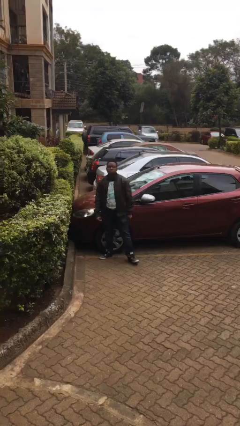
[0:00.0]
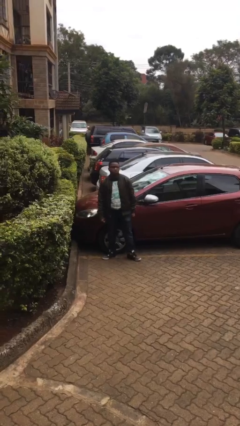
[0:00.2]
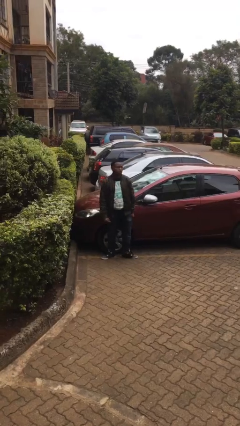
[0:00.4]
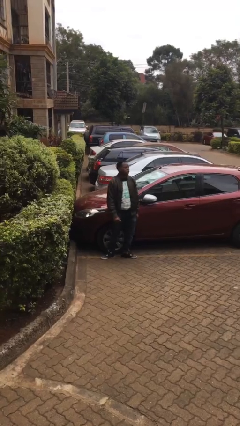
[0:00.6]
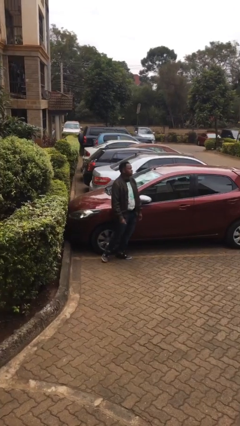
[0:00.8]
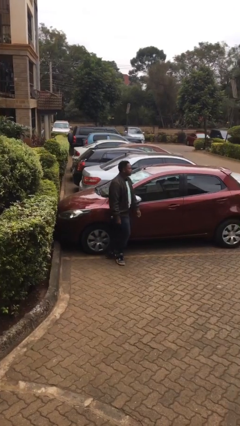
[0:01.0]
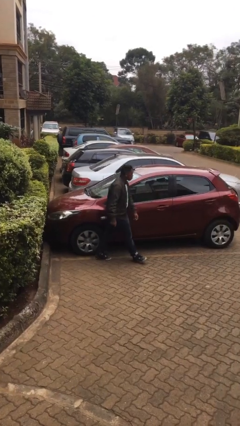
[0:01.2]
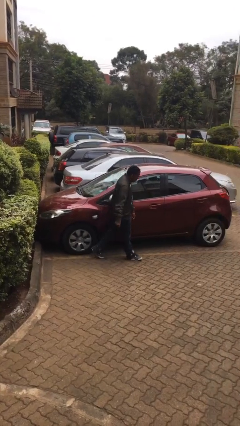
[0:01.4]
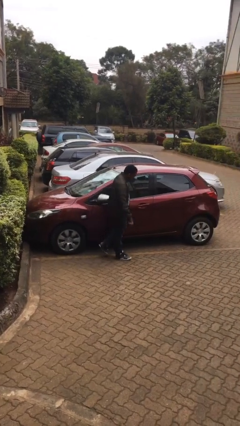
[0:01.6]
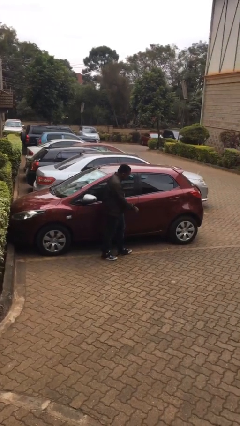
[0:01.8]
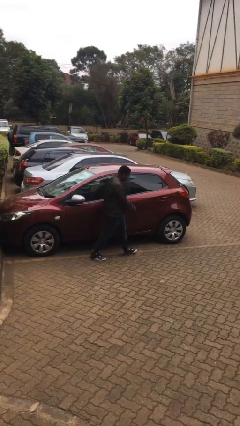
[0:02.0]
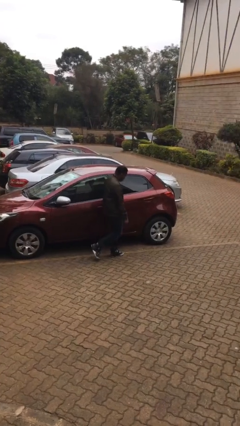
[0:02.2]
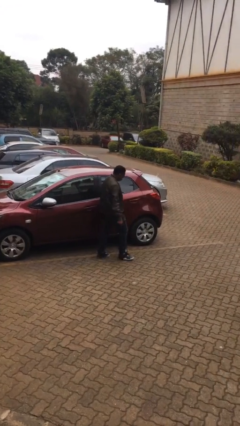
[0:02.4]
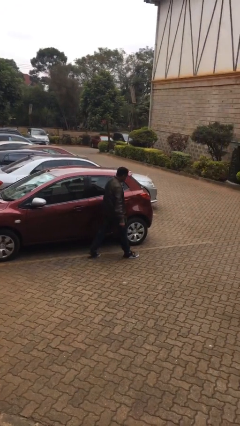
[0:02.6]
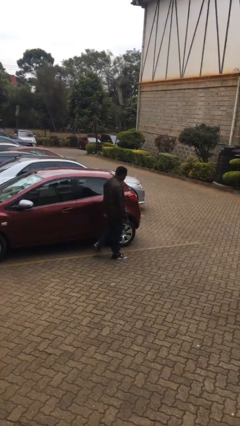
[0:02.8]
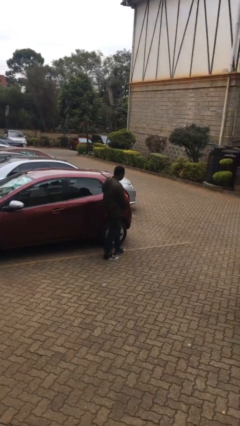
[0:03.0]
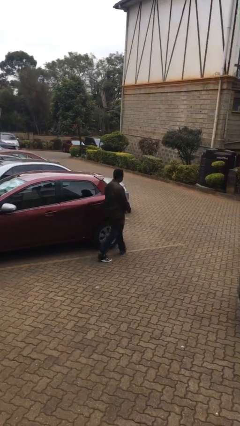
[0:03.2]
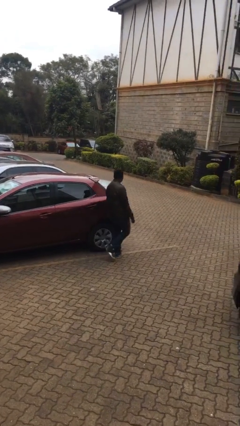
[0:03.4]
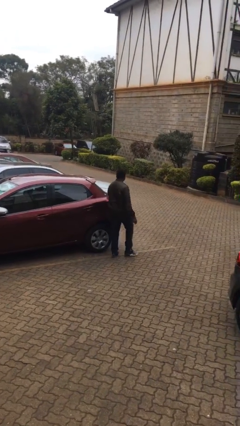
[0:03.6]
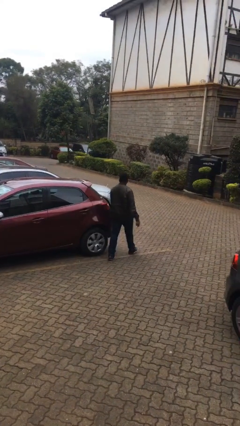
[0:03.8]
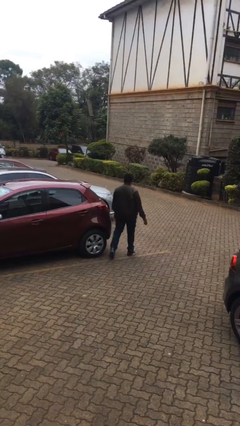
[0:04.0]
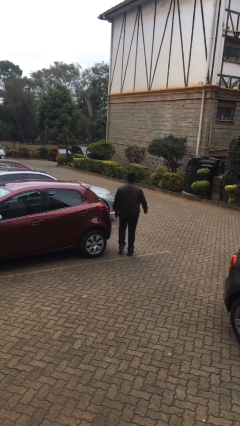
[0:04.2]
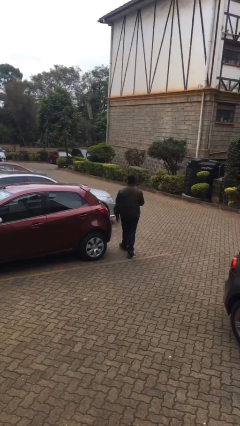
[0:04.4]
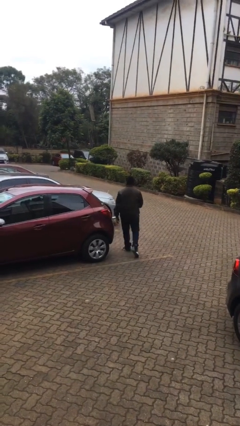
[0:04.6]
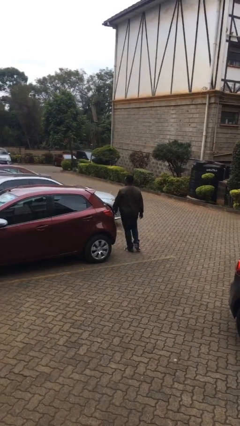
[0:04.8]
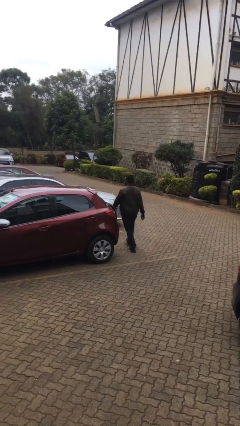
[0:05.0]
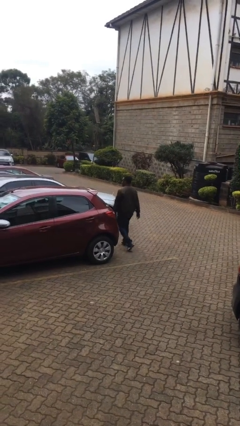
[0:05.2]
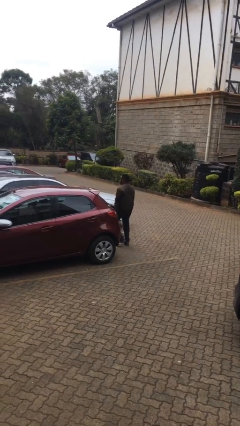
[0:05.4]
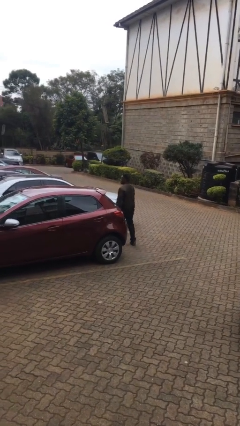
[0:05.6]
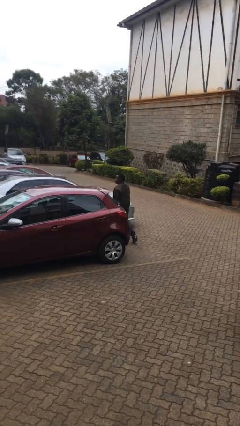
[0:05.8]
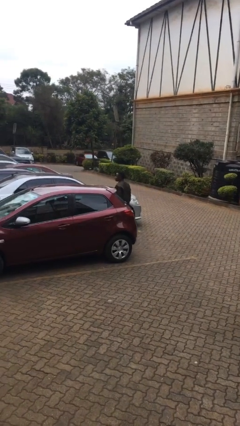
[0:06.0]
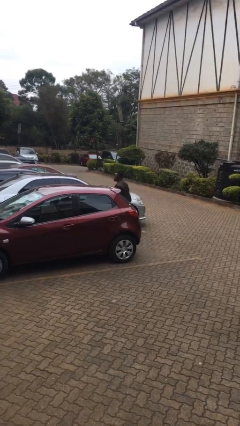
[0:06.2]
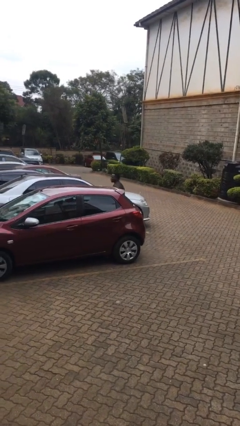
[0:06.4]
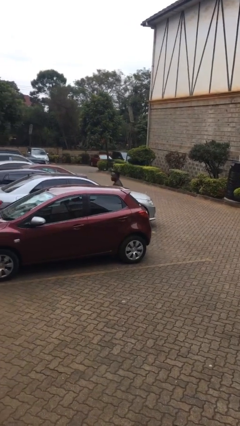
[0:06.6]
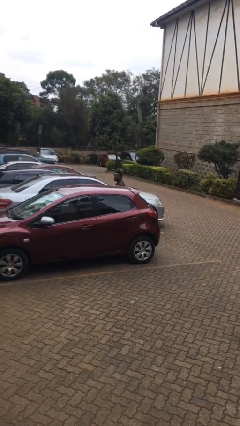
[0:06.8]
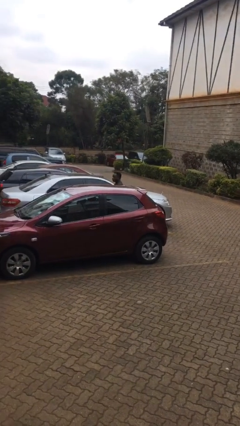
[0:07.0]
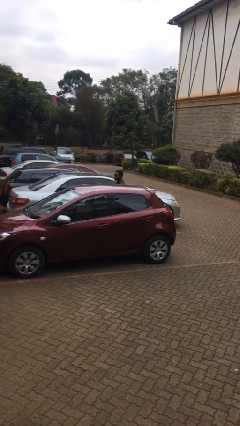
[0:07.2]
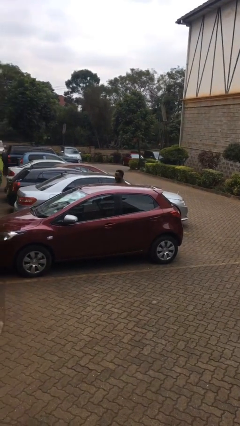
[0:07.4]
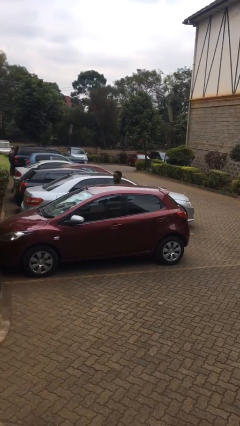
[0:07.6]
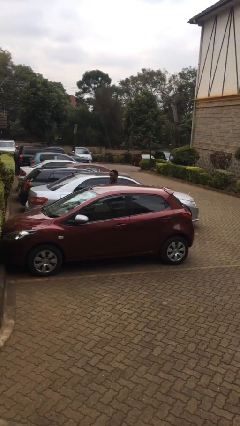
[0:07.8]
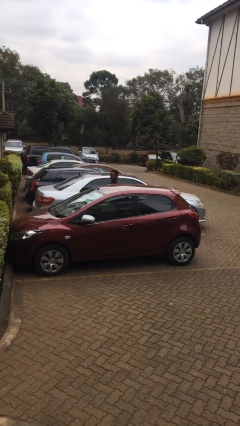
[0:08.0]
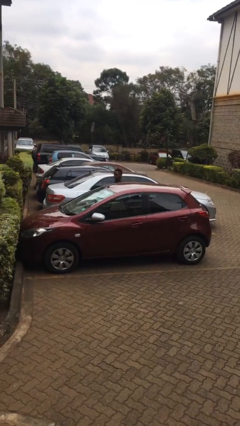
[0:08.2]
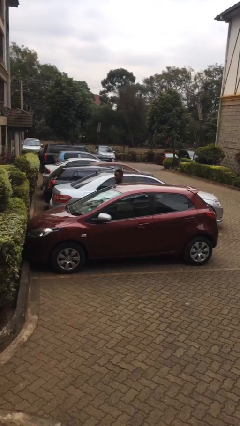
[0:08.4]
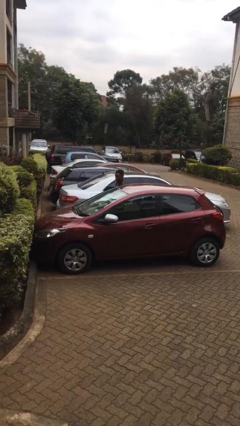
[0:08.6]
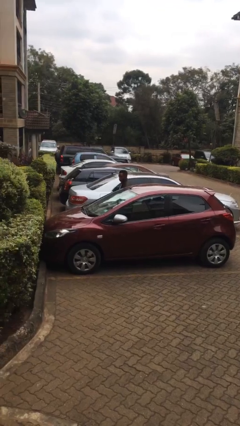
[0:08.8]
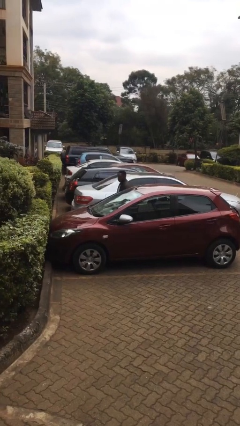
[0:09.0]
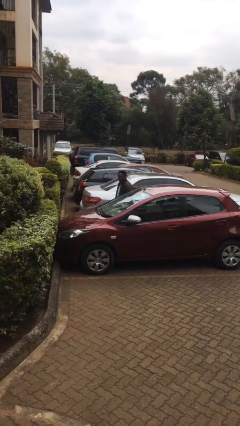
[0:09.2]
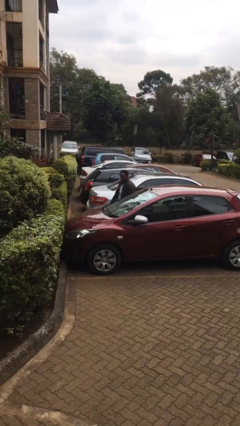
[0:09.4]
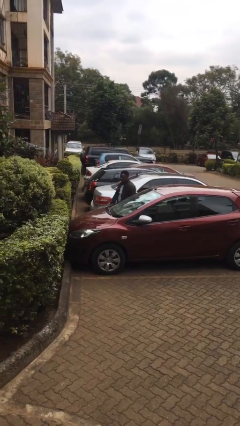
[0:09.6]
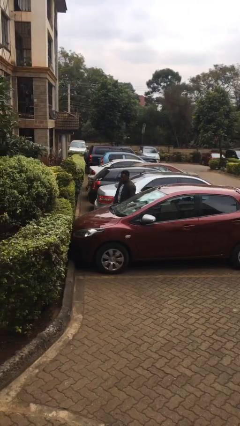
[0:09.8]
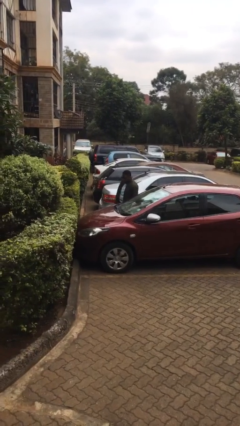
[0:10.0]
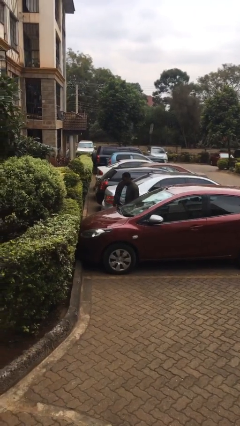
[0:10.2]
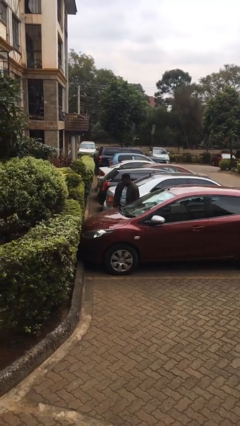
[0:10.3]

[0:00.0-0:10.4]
person walks around car

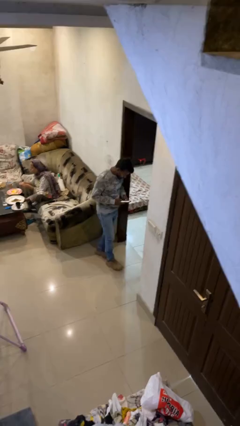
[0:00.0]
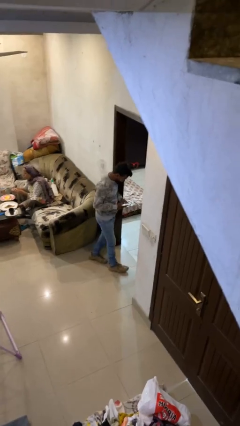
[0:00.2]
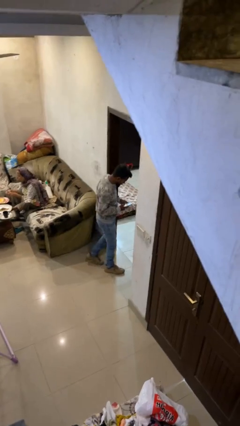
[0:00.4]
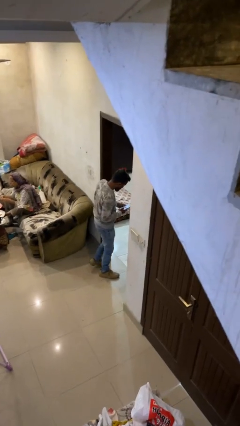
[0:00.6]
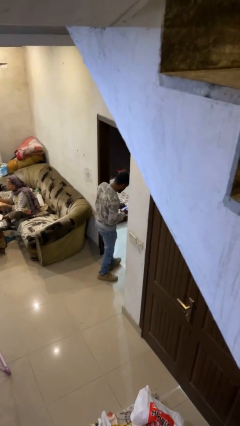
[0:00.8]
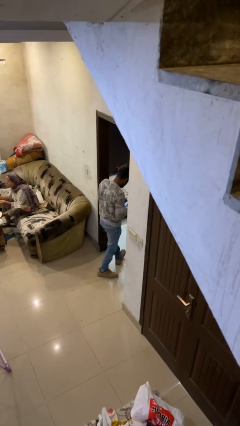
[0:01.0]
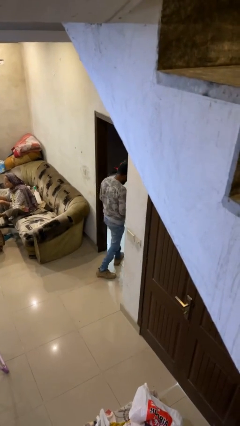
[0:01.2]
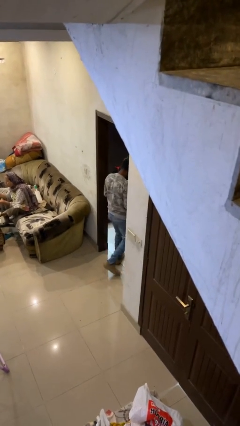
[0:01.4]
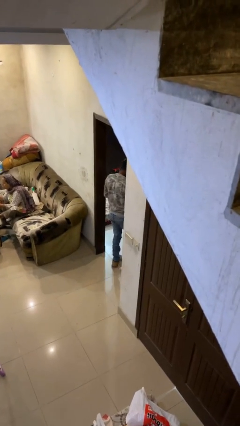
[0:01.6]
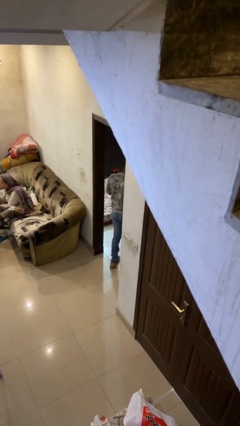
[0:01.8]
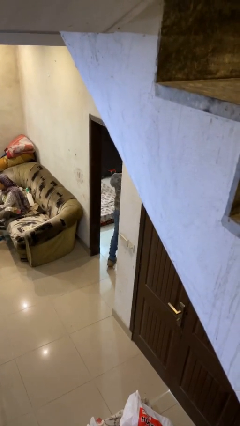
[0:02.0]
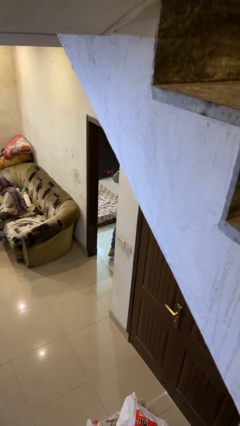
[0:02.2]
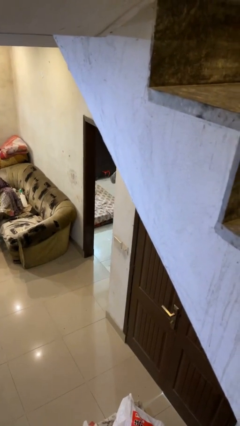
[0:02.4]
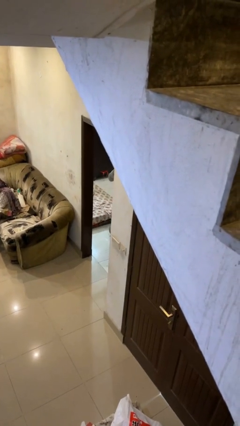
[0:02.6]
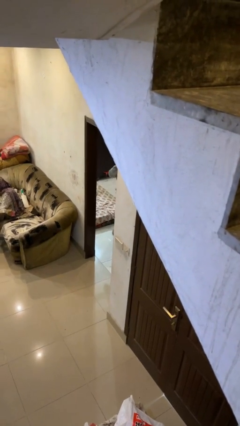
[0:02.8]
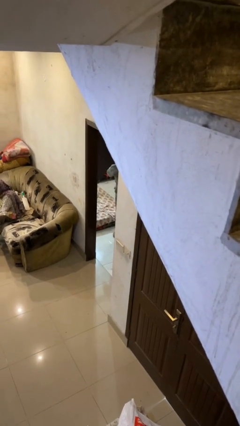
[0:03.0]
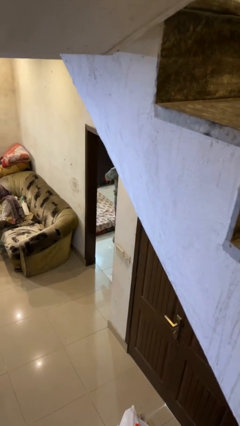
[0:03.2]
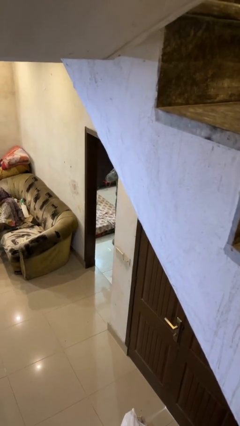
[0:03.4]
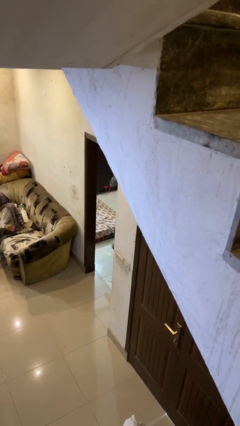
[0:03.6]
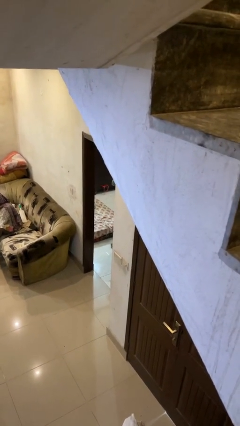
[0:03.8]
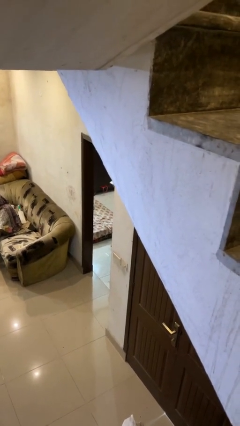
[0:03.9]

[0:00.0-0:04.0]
person exits scene through structure

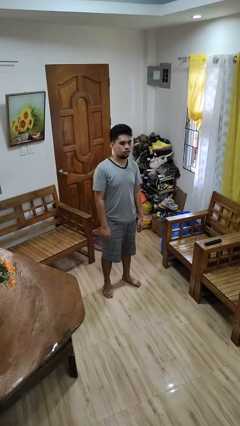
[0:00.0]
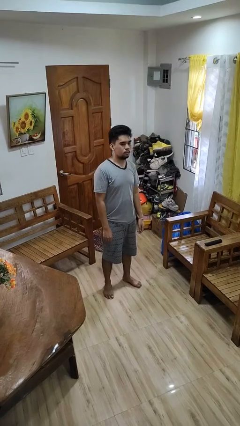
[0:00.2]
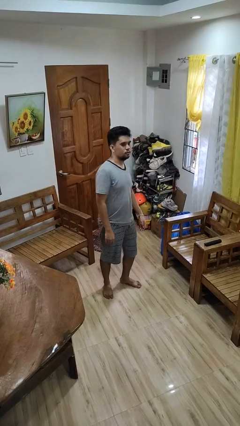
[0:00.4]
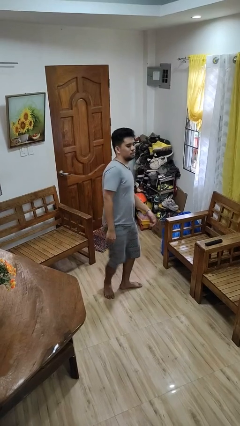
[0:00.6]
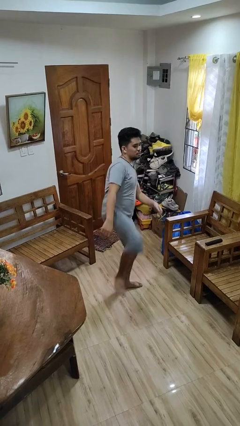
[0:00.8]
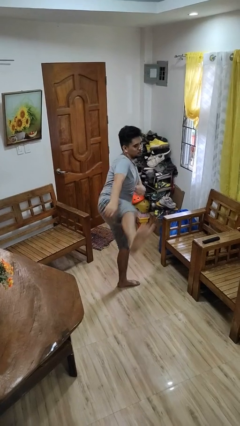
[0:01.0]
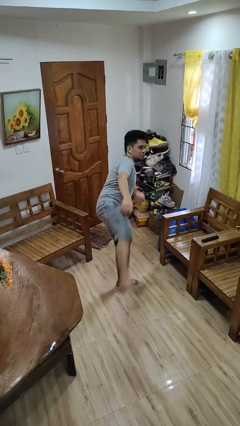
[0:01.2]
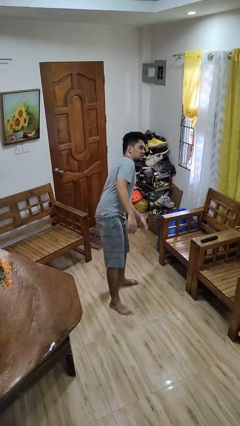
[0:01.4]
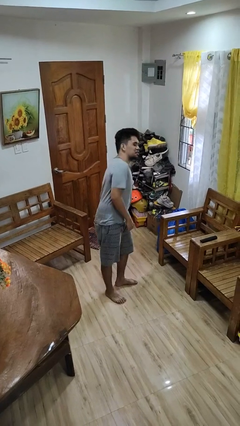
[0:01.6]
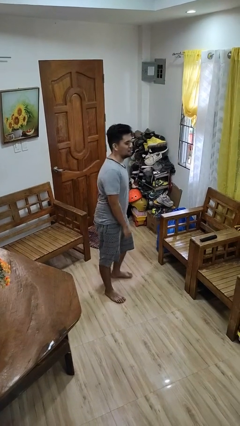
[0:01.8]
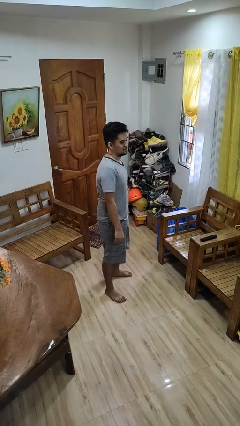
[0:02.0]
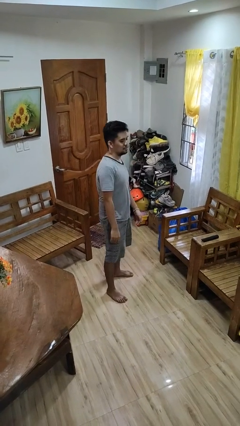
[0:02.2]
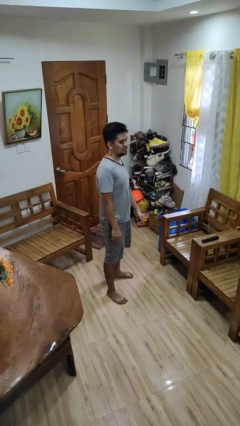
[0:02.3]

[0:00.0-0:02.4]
person karate kicks

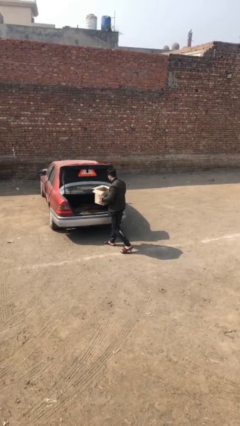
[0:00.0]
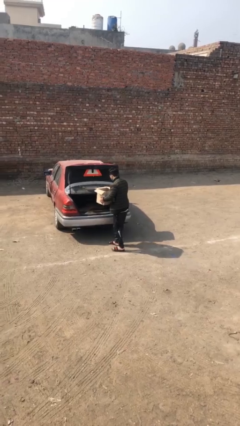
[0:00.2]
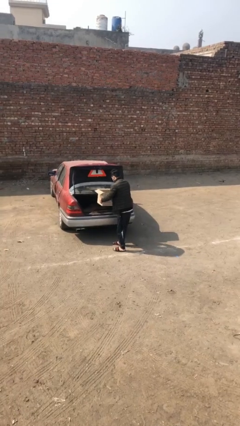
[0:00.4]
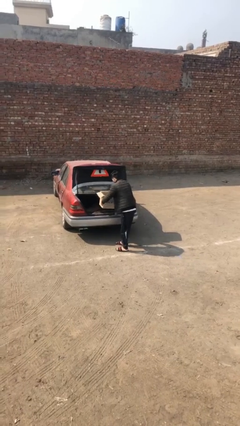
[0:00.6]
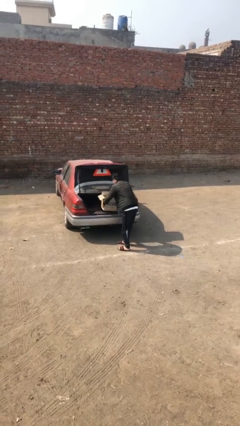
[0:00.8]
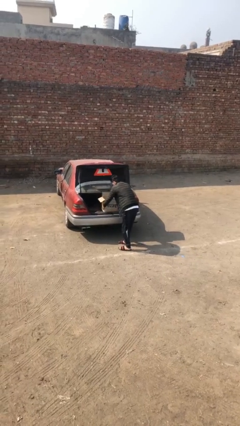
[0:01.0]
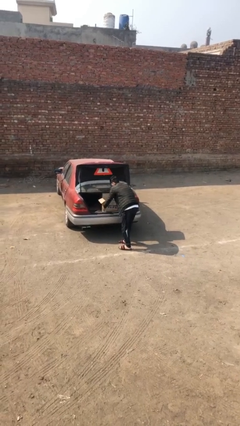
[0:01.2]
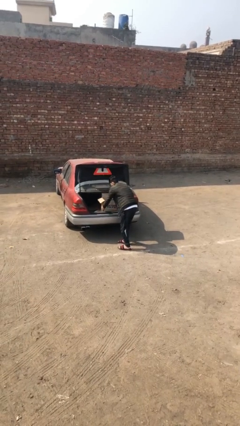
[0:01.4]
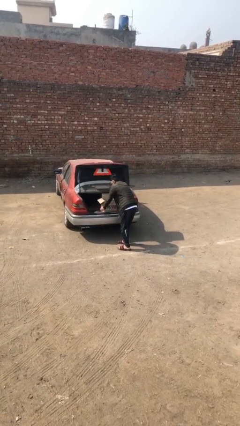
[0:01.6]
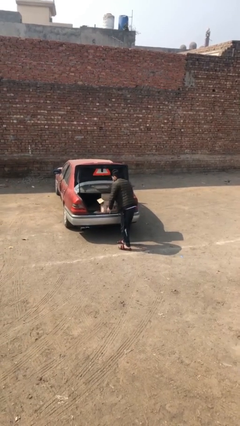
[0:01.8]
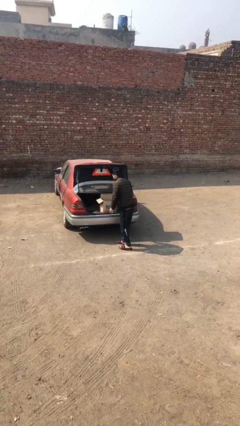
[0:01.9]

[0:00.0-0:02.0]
person loads car
